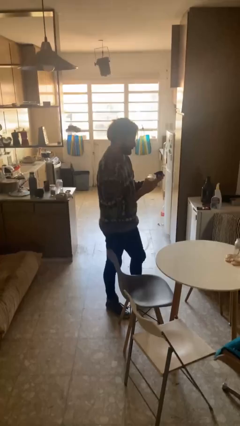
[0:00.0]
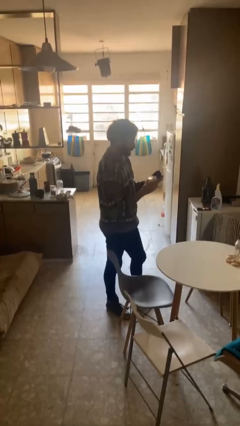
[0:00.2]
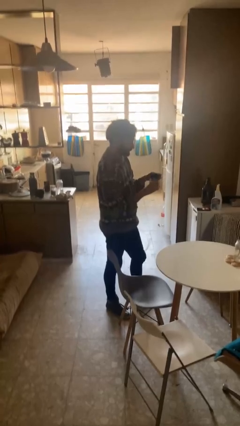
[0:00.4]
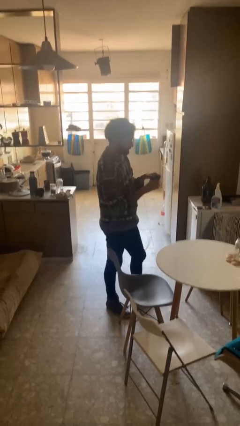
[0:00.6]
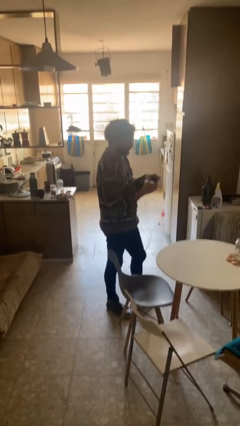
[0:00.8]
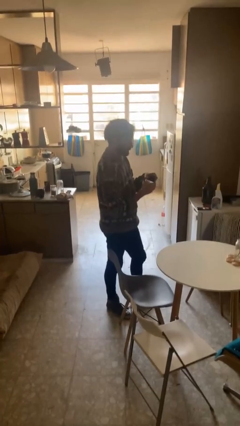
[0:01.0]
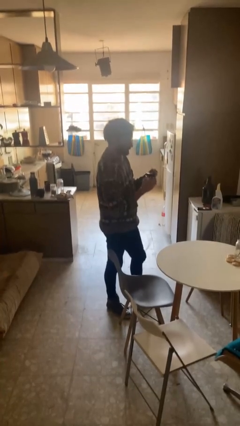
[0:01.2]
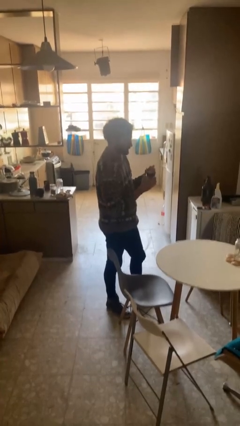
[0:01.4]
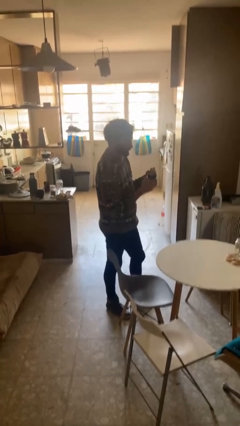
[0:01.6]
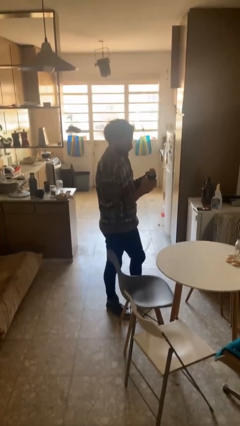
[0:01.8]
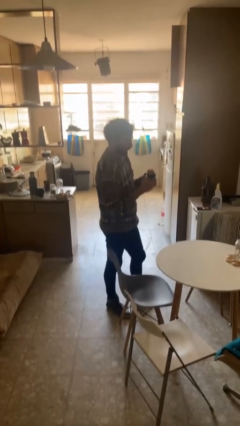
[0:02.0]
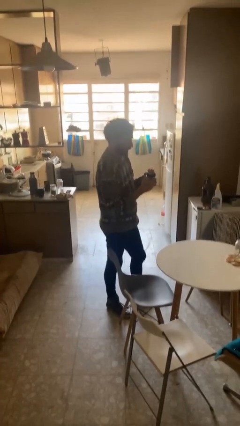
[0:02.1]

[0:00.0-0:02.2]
person closes jar

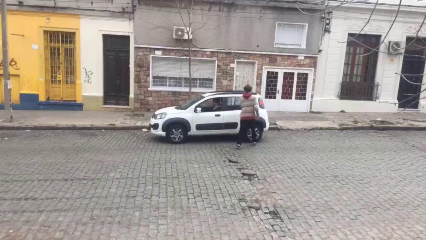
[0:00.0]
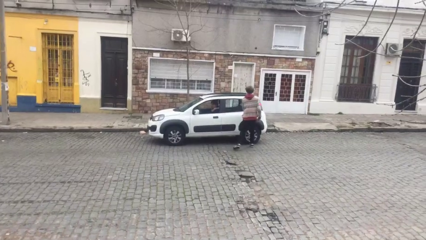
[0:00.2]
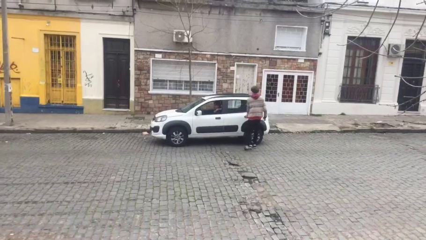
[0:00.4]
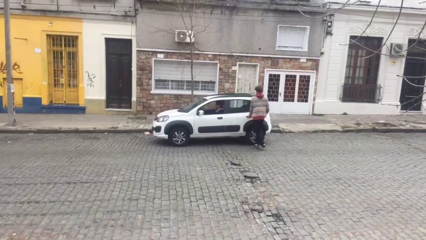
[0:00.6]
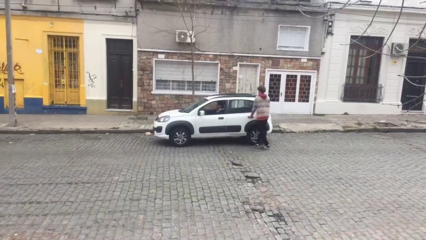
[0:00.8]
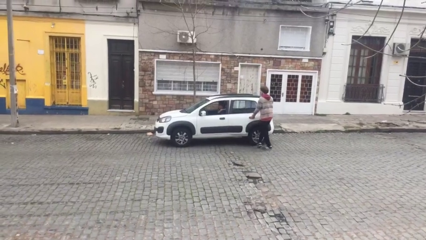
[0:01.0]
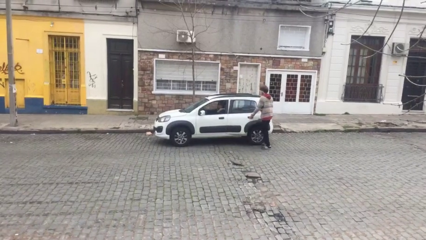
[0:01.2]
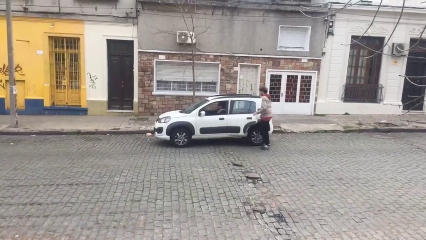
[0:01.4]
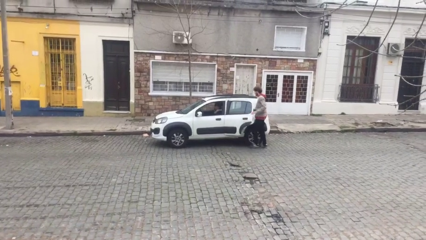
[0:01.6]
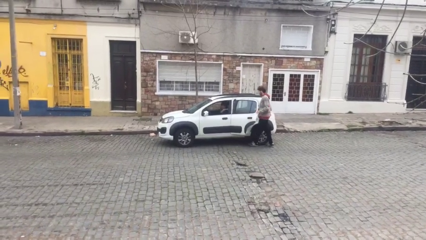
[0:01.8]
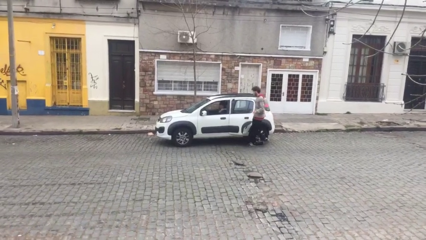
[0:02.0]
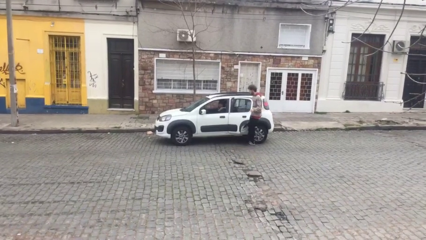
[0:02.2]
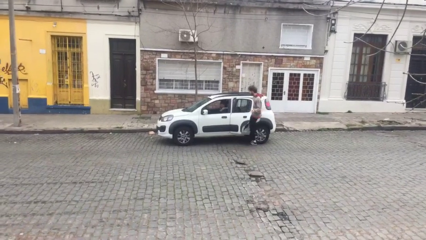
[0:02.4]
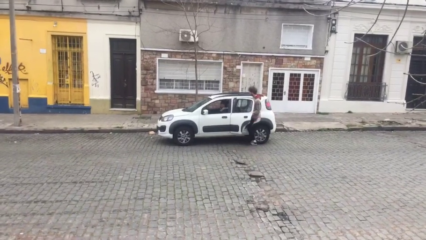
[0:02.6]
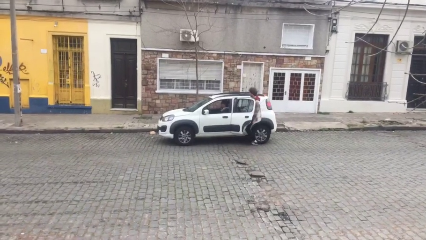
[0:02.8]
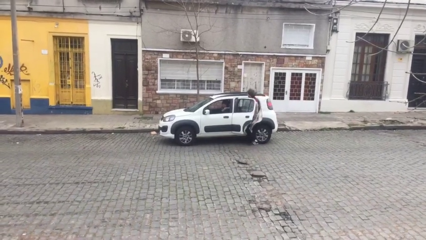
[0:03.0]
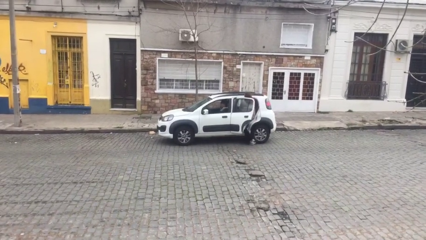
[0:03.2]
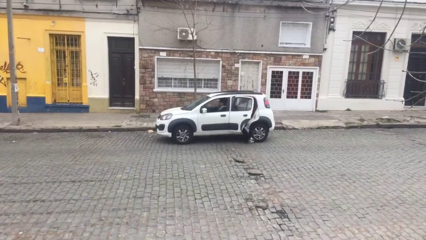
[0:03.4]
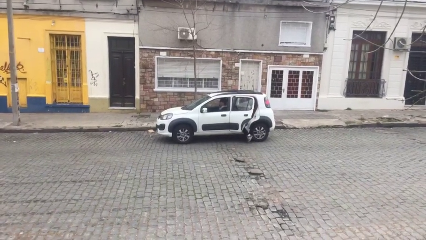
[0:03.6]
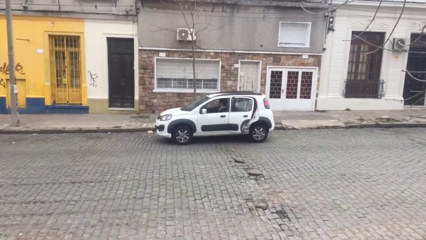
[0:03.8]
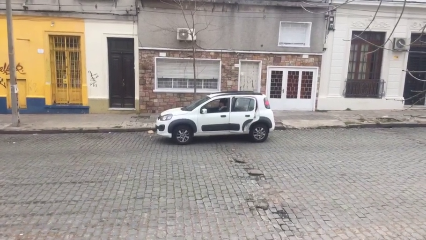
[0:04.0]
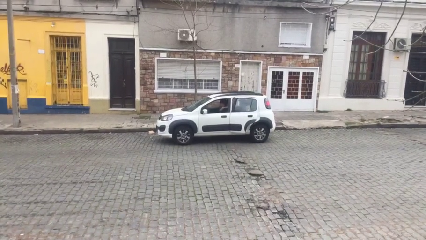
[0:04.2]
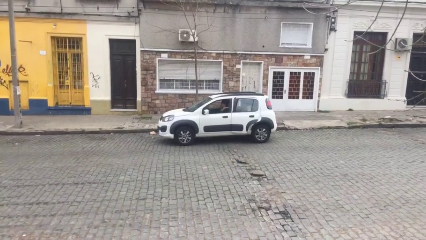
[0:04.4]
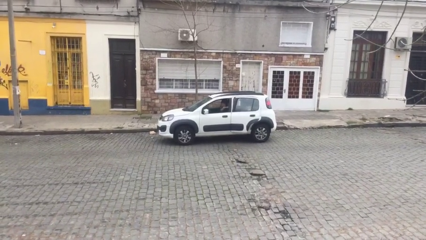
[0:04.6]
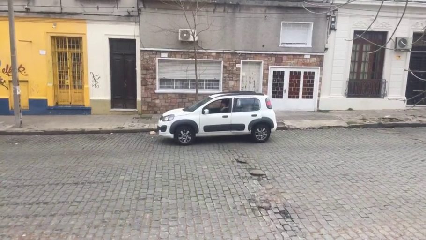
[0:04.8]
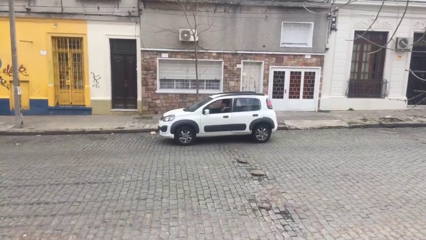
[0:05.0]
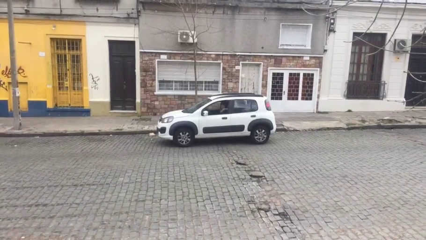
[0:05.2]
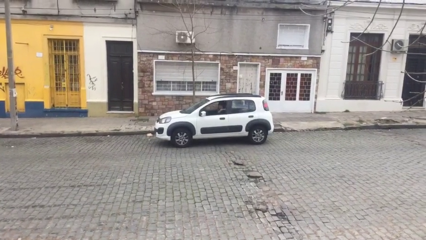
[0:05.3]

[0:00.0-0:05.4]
car picks up person

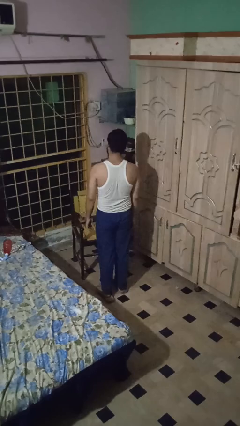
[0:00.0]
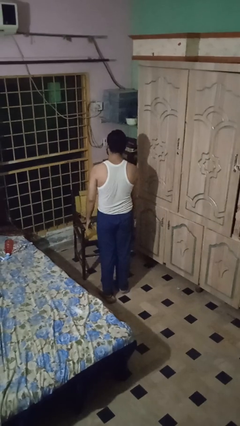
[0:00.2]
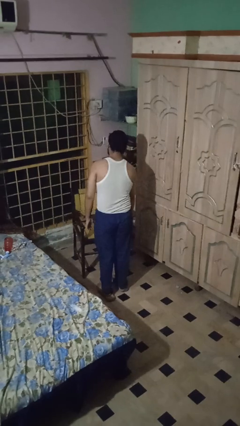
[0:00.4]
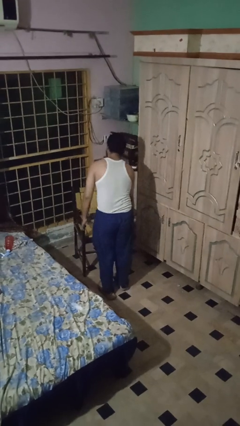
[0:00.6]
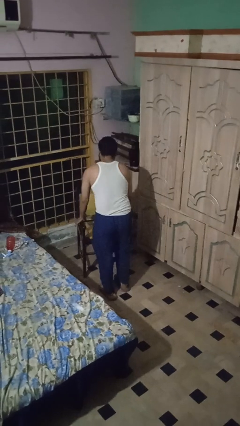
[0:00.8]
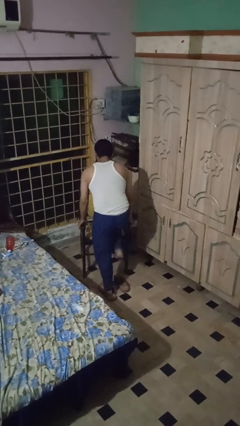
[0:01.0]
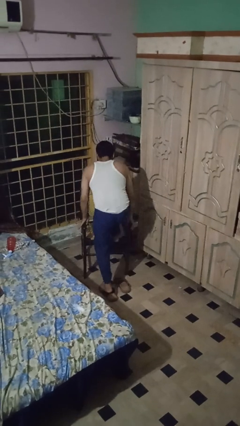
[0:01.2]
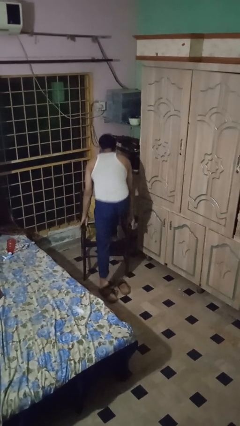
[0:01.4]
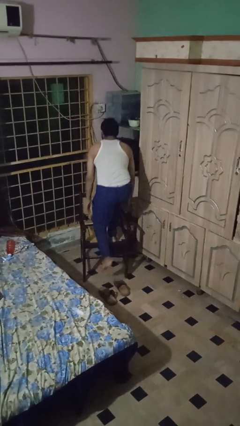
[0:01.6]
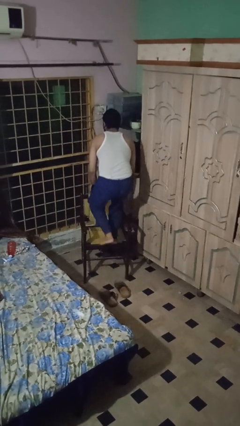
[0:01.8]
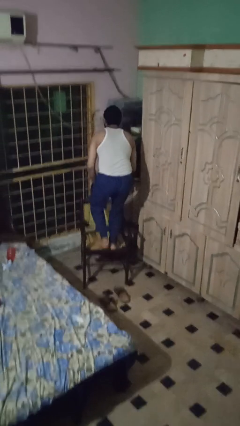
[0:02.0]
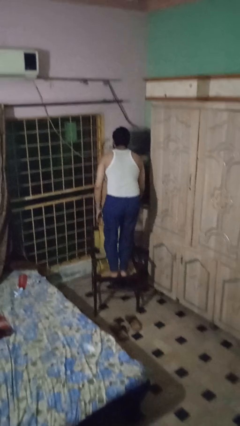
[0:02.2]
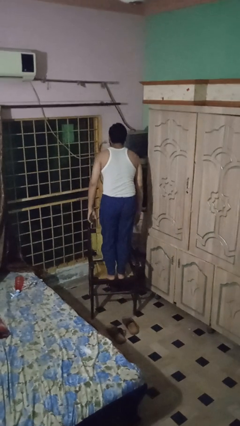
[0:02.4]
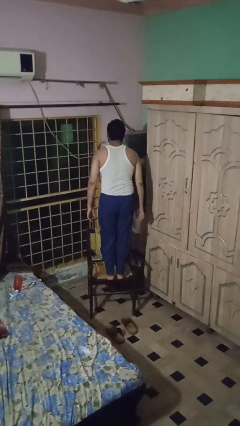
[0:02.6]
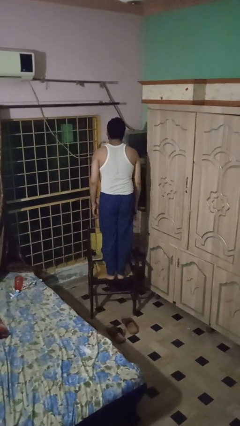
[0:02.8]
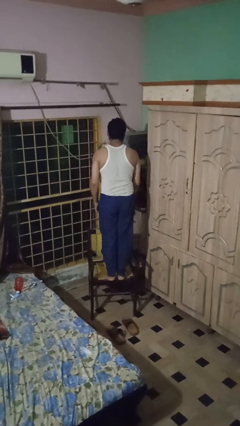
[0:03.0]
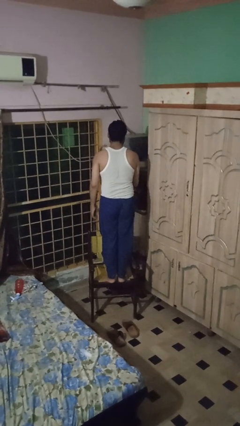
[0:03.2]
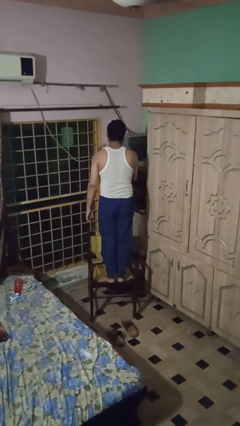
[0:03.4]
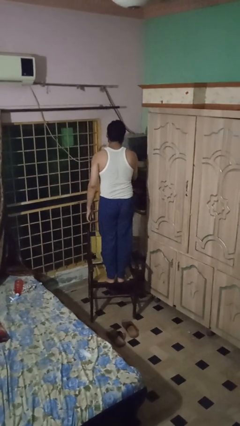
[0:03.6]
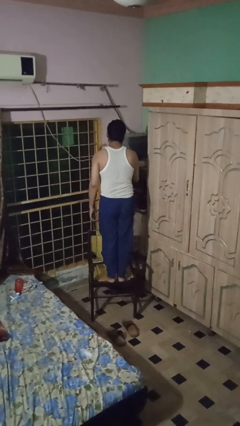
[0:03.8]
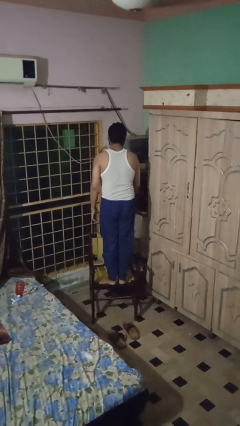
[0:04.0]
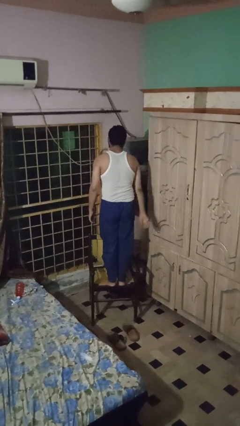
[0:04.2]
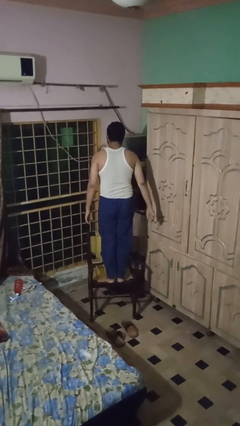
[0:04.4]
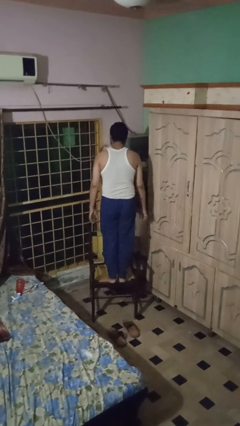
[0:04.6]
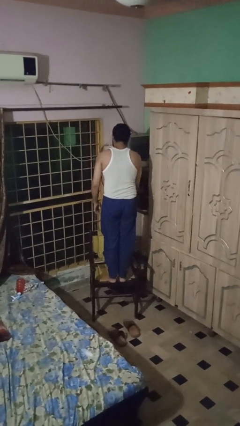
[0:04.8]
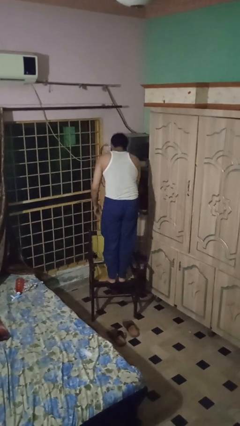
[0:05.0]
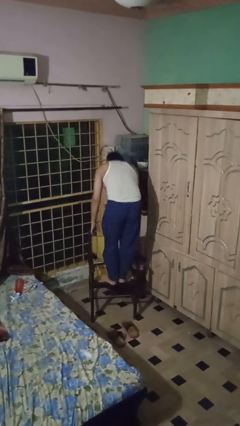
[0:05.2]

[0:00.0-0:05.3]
person climbs on chair

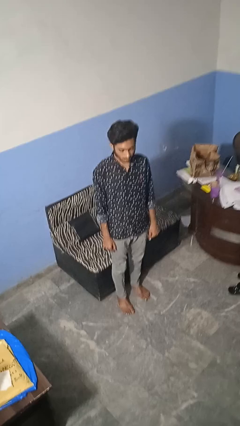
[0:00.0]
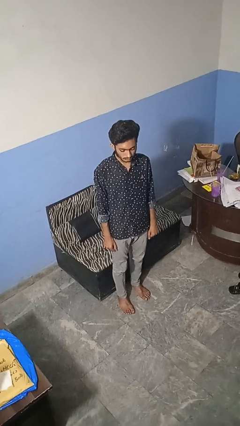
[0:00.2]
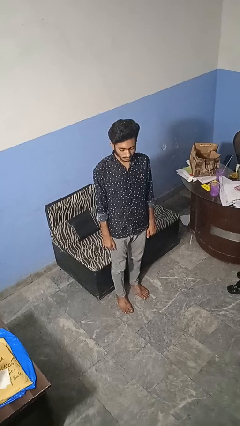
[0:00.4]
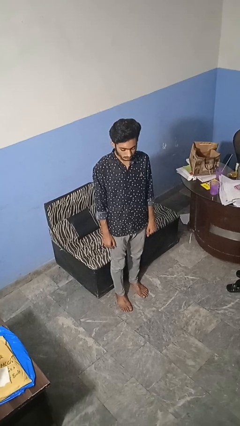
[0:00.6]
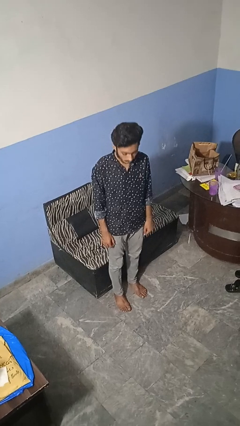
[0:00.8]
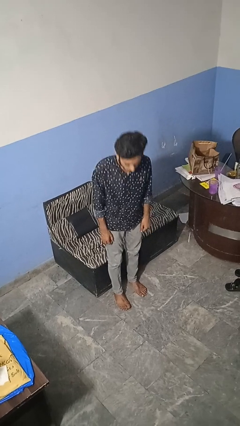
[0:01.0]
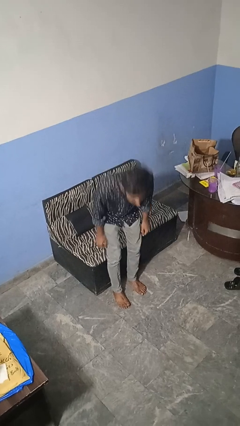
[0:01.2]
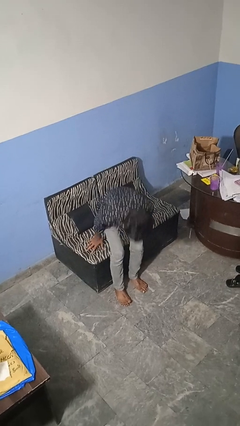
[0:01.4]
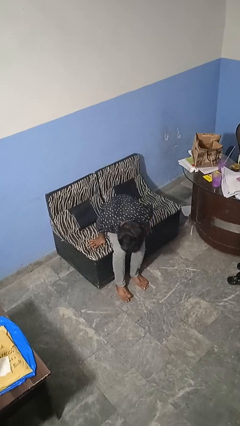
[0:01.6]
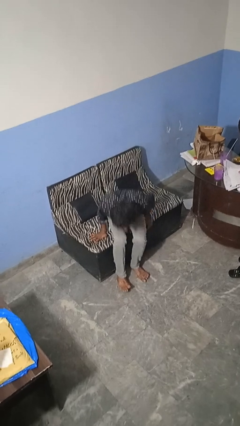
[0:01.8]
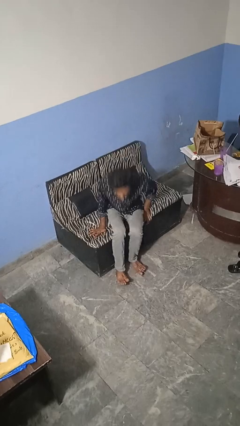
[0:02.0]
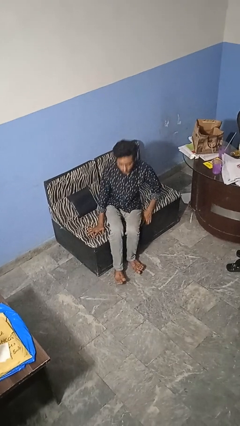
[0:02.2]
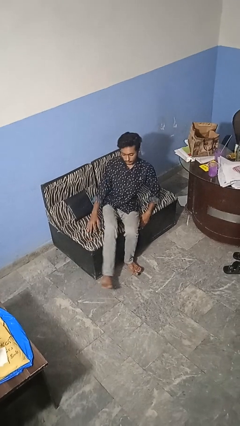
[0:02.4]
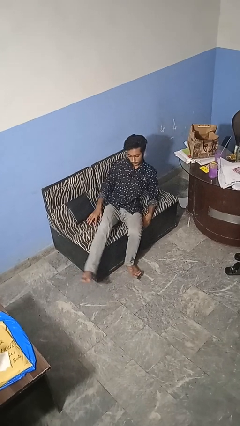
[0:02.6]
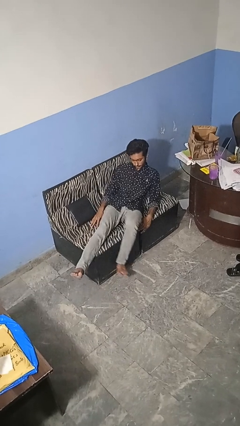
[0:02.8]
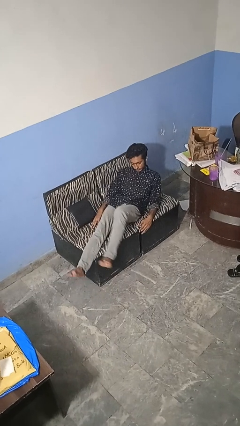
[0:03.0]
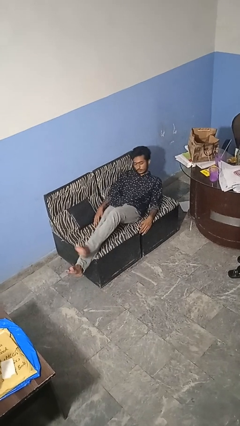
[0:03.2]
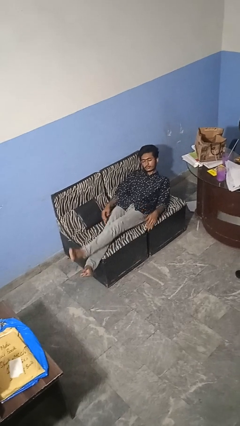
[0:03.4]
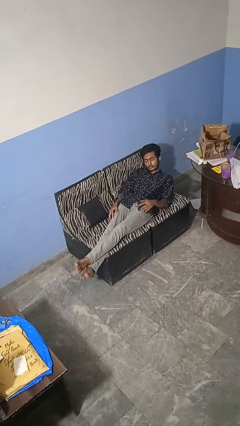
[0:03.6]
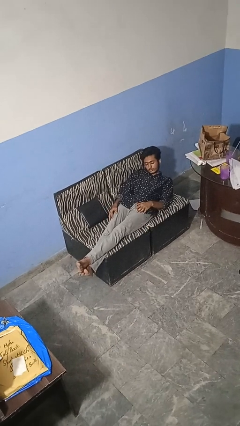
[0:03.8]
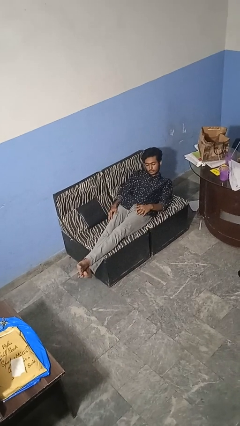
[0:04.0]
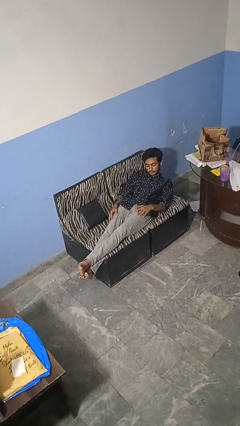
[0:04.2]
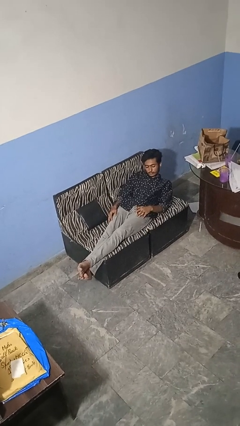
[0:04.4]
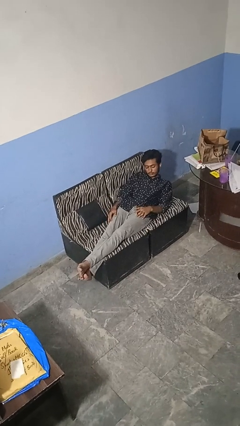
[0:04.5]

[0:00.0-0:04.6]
person lies down on couch

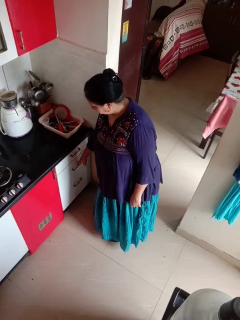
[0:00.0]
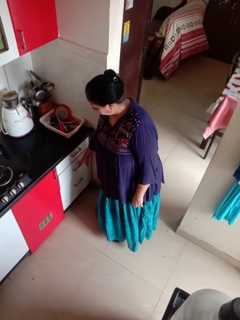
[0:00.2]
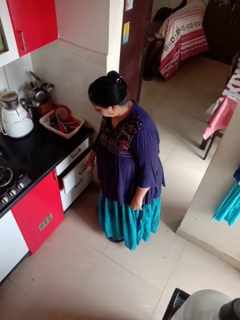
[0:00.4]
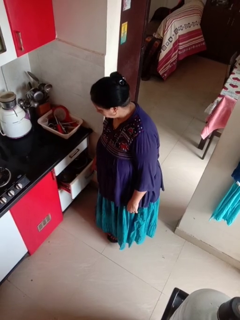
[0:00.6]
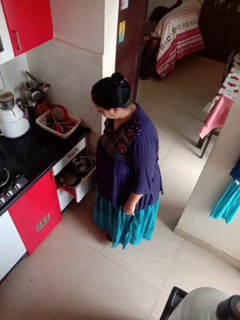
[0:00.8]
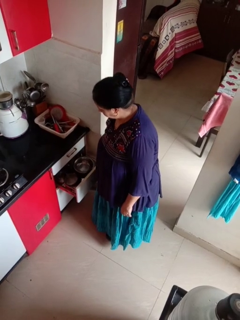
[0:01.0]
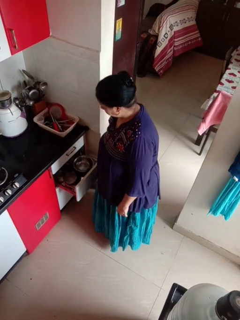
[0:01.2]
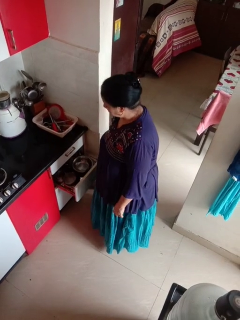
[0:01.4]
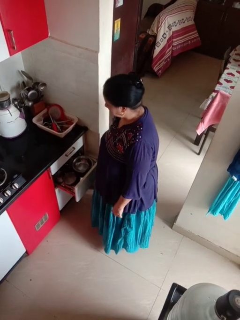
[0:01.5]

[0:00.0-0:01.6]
person opens kitchen drawer
